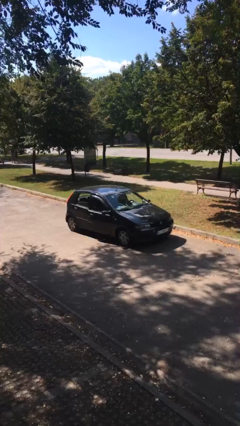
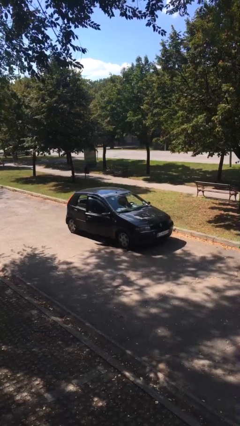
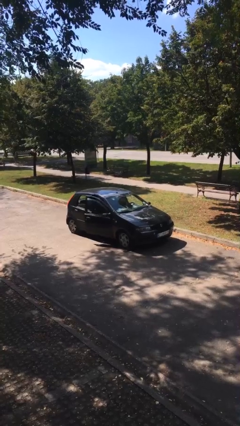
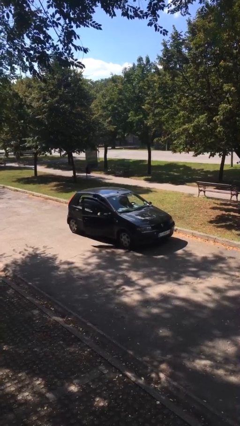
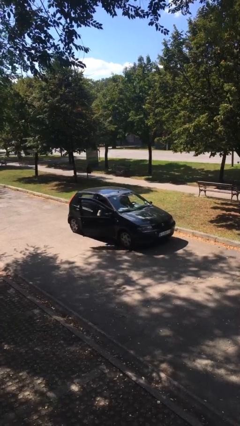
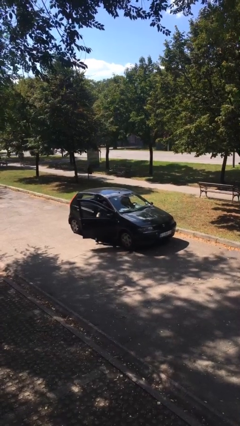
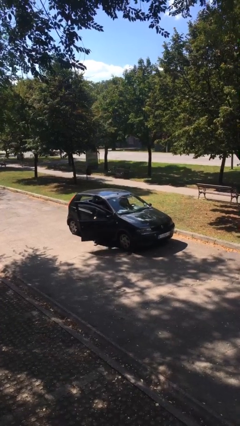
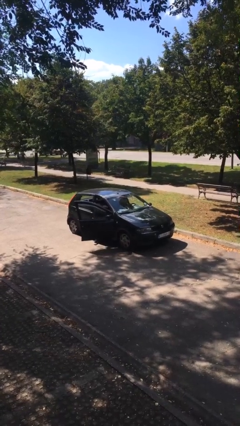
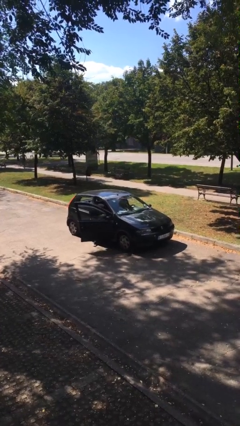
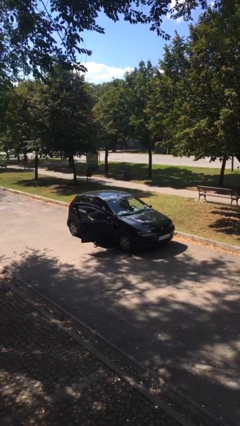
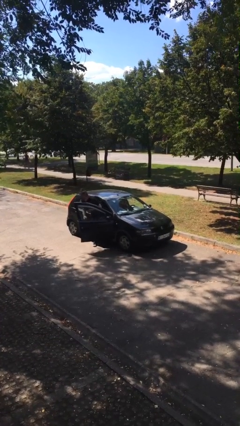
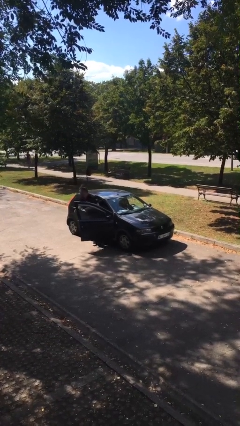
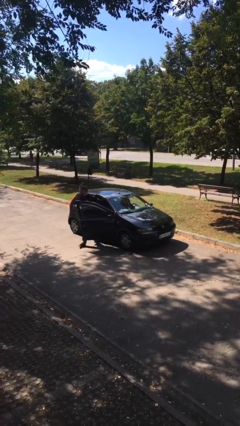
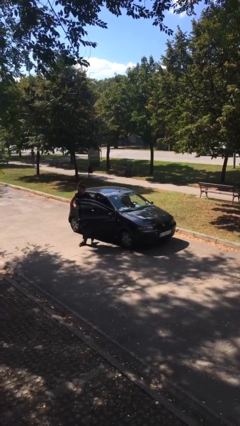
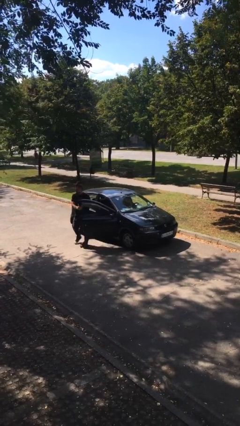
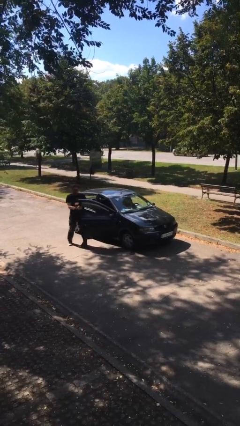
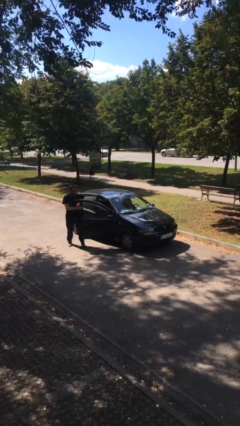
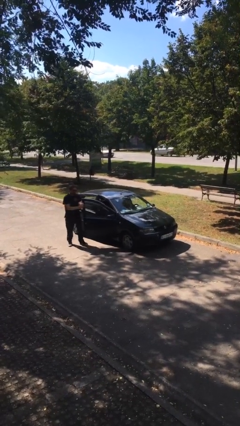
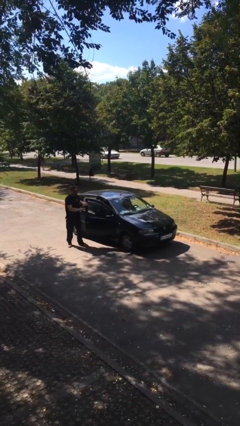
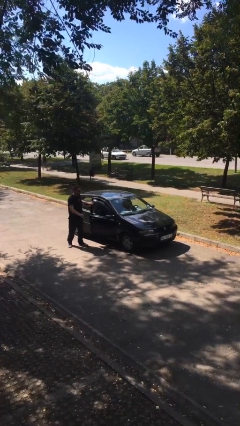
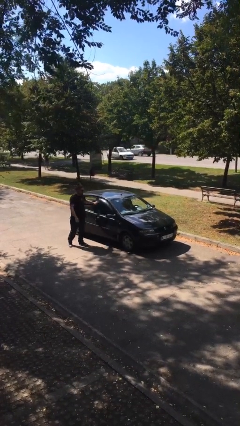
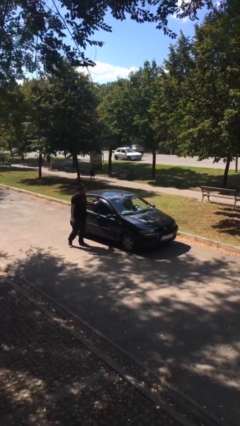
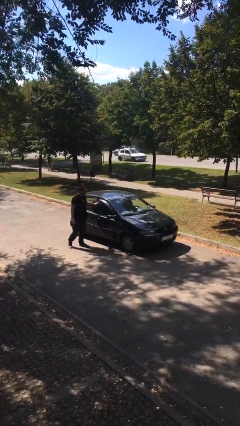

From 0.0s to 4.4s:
car drops off person

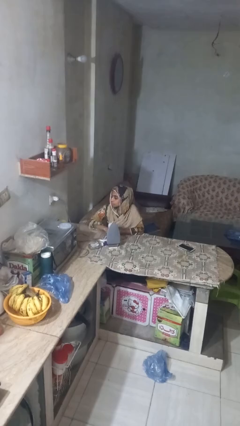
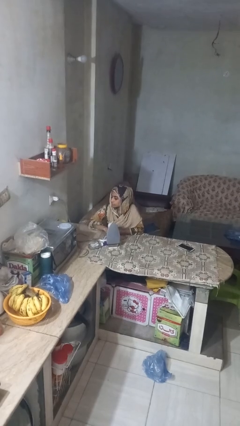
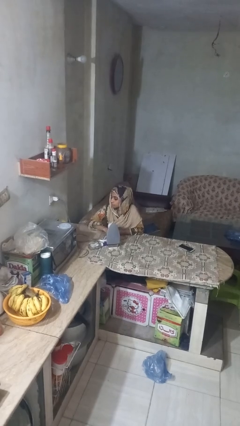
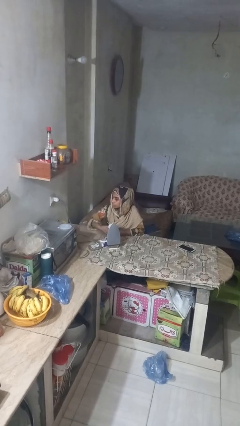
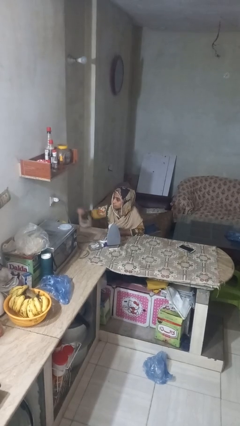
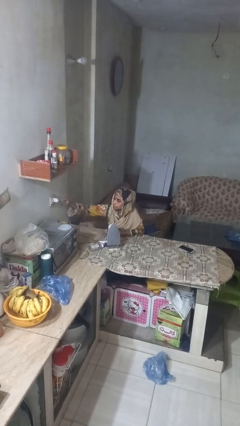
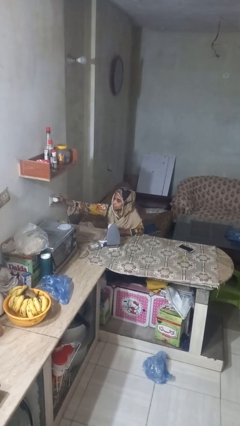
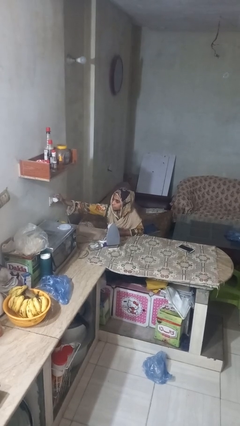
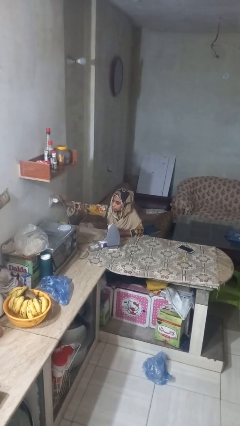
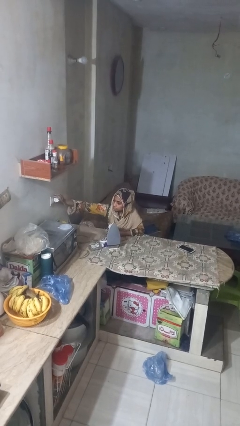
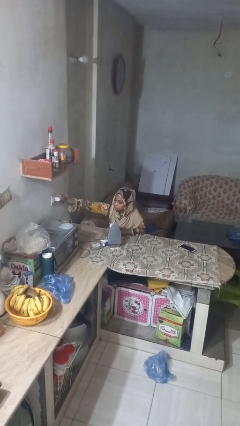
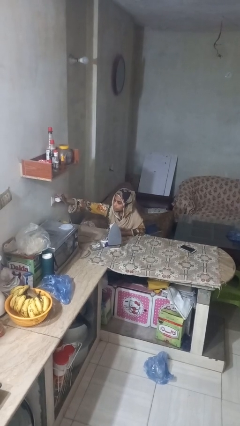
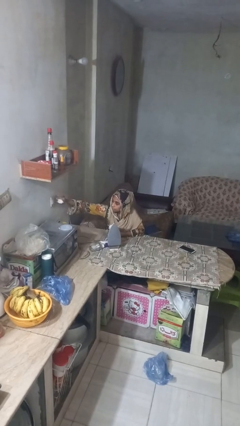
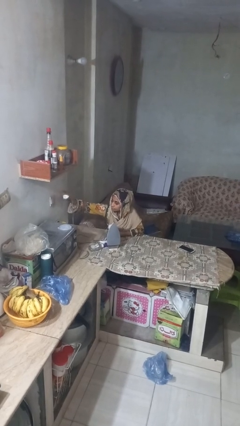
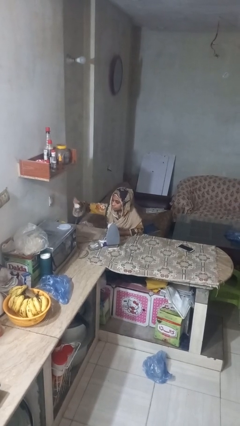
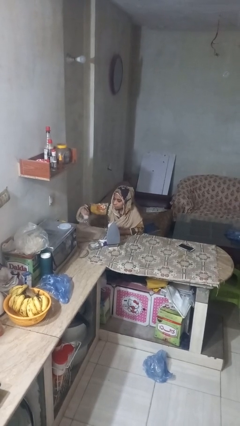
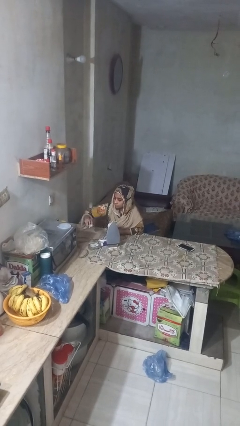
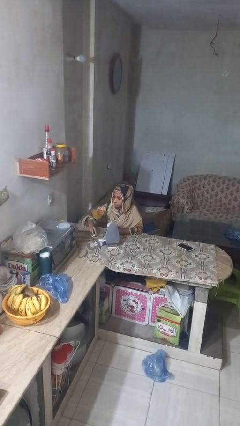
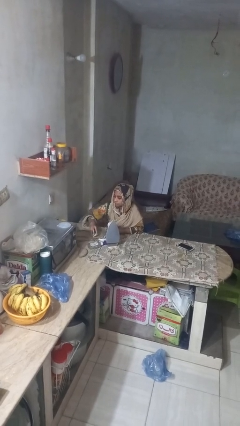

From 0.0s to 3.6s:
person unplugs from electrical socket

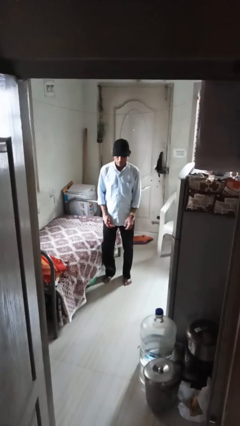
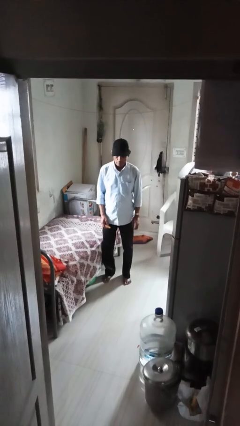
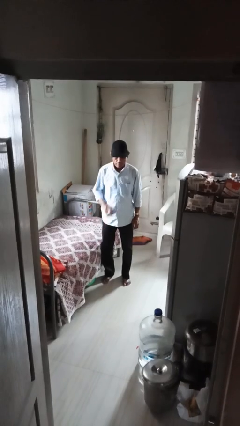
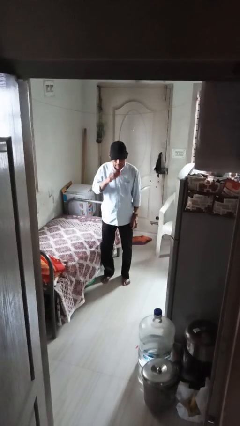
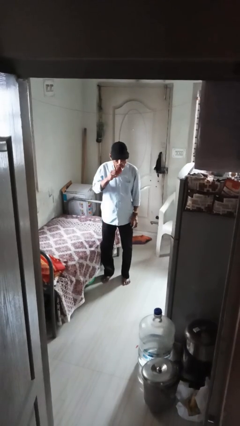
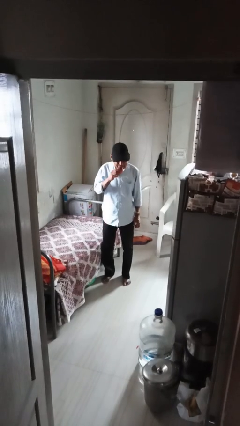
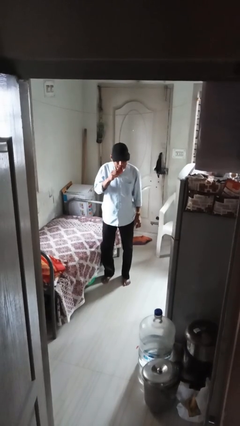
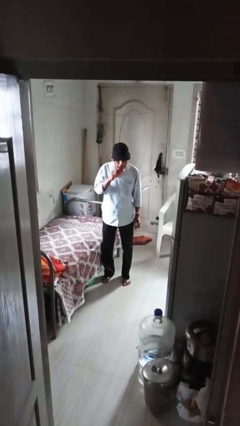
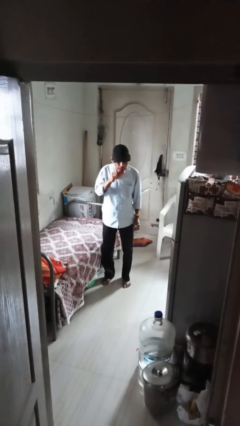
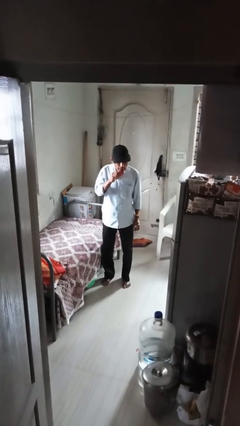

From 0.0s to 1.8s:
person eats apple

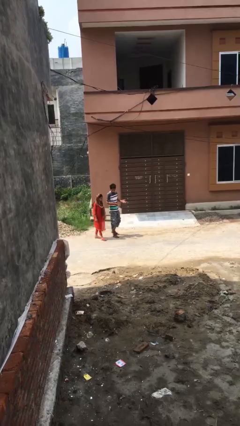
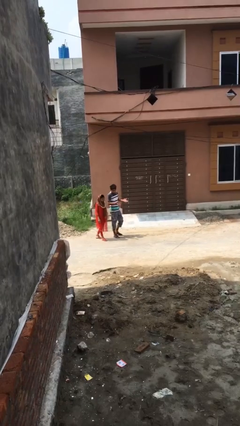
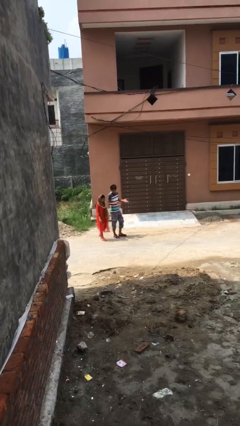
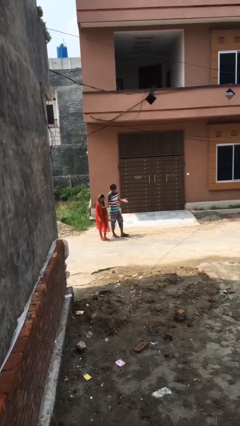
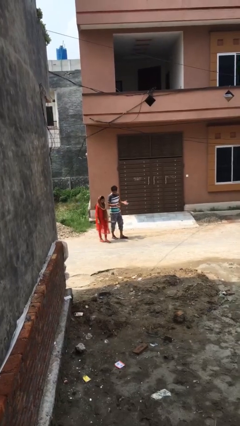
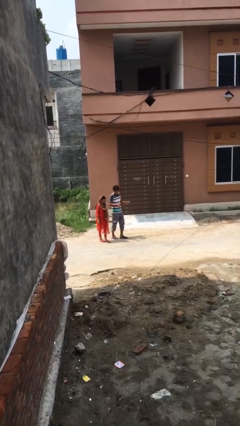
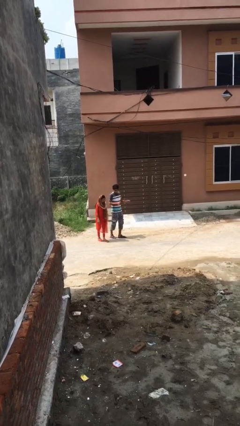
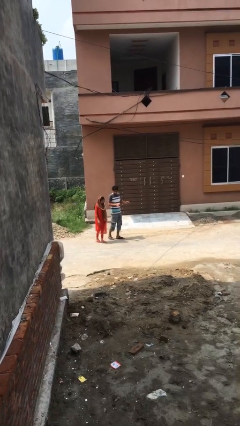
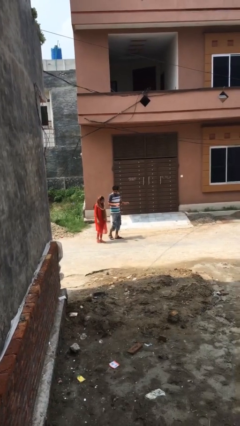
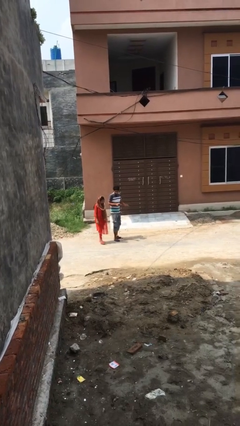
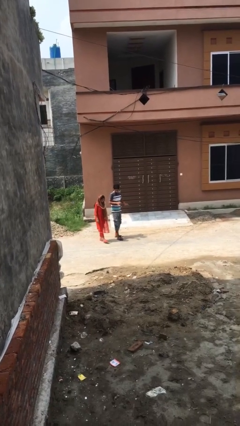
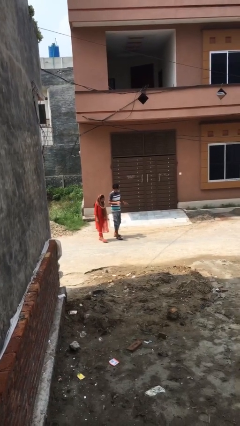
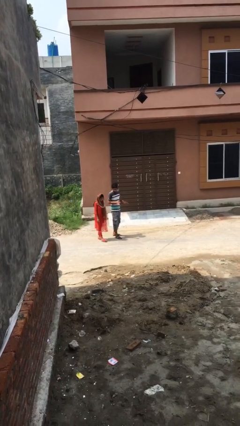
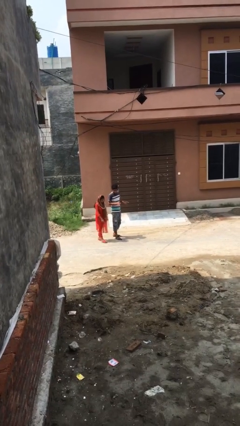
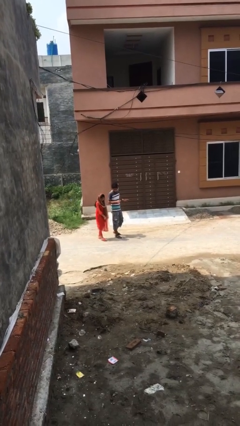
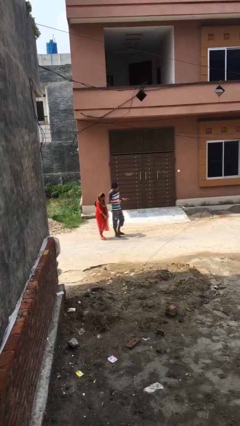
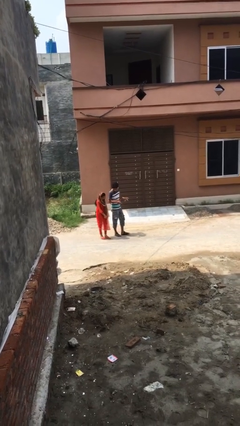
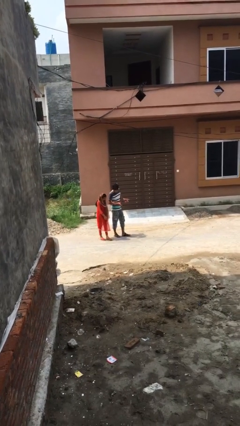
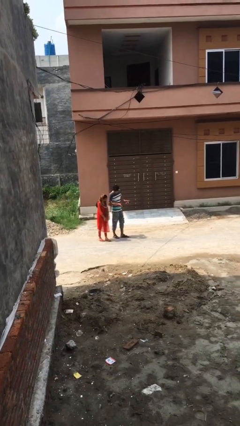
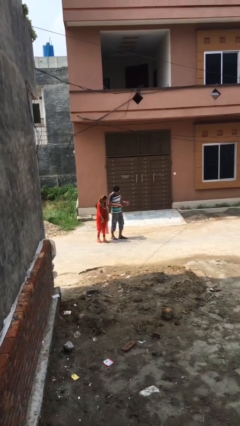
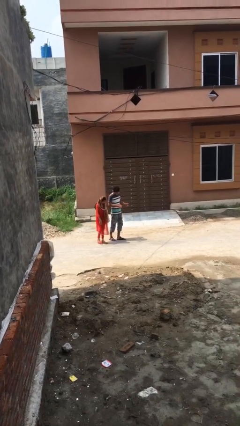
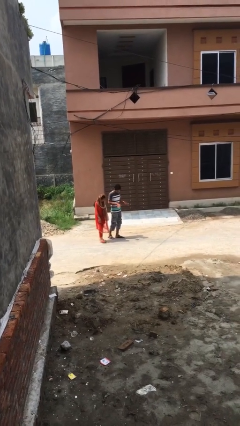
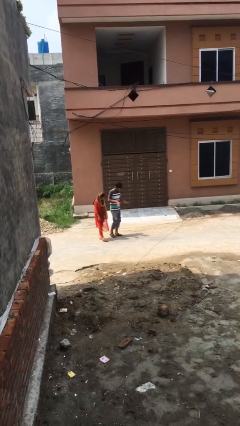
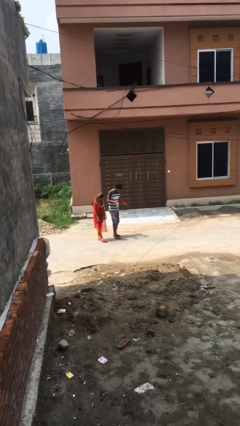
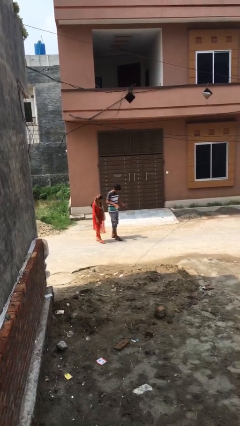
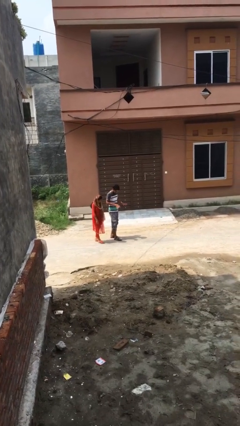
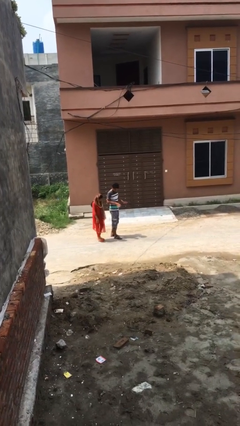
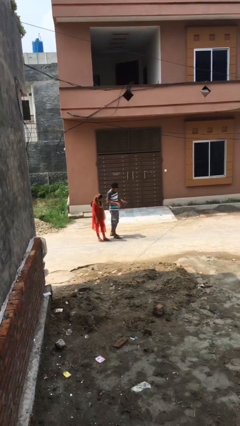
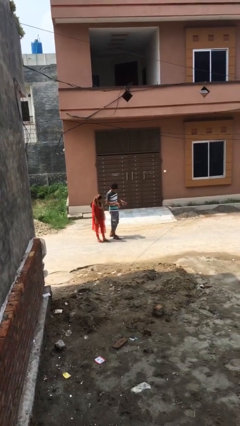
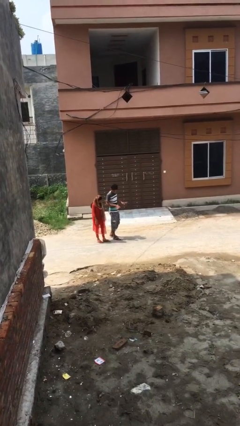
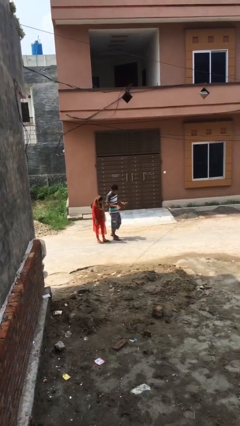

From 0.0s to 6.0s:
person talks to person

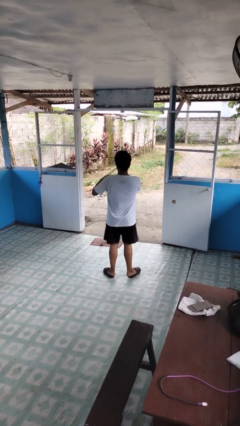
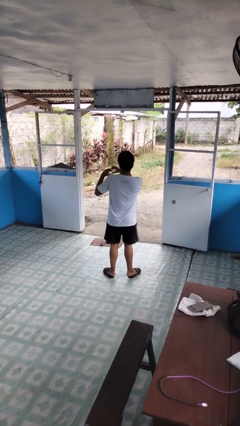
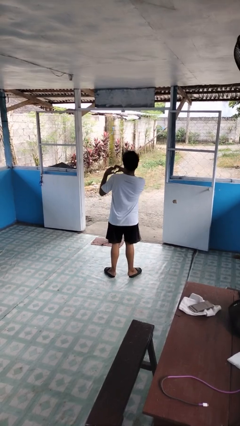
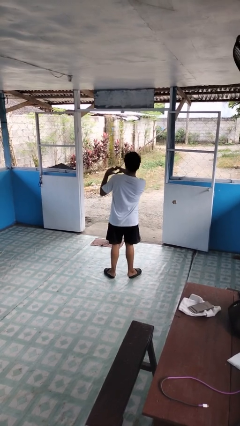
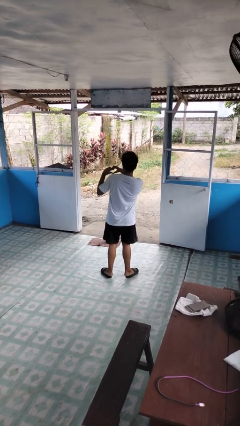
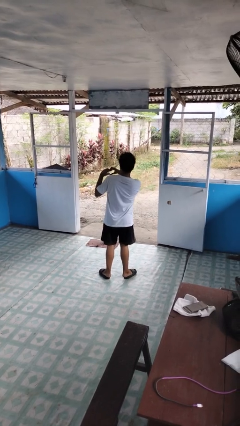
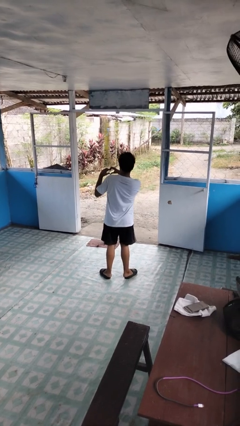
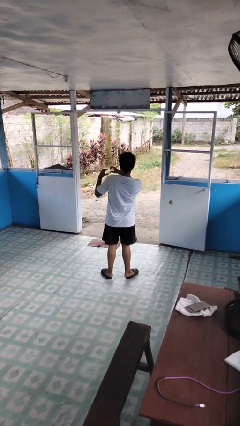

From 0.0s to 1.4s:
person gestures heart

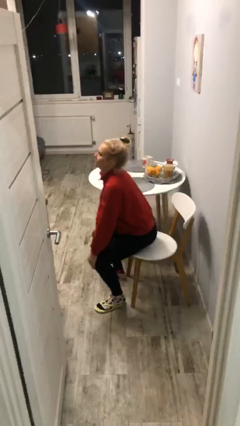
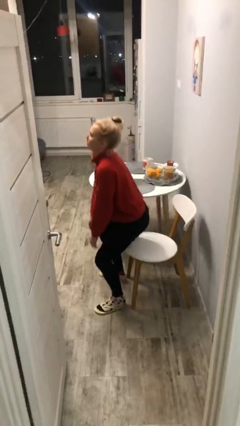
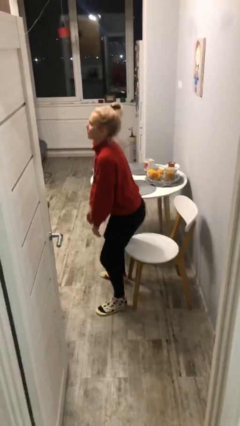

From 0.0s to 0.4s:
person stands up
